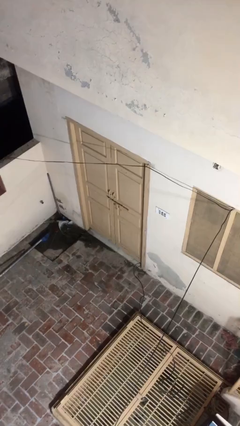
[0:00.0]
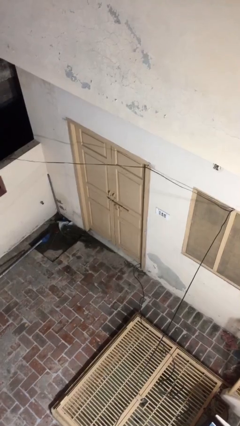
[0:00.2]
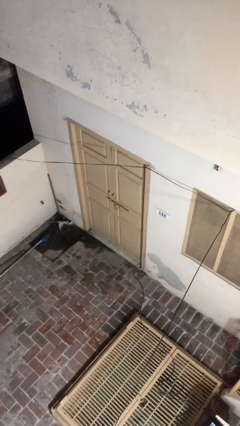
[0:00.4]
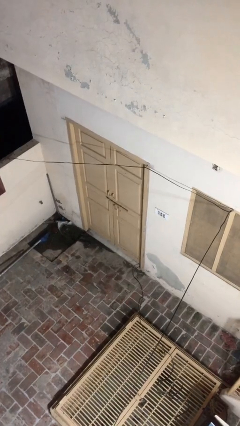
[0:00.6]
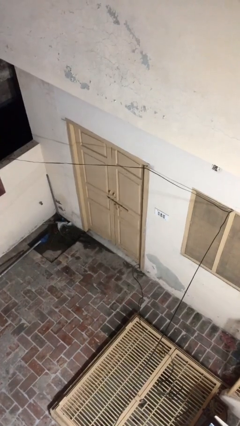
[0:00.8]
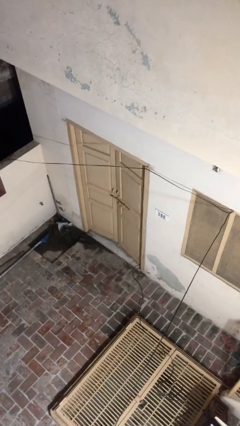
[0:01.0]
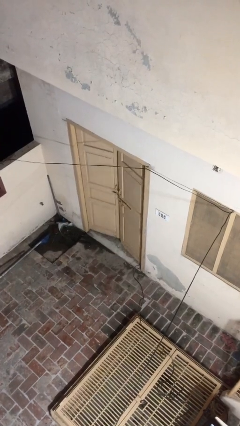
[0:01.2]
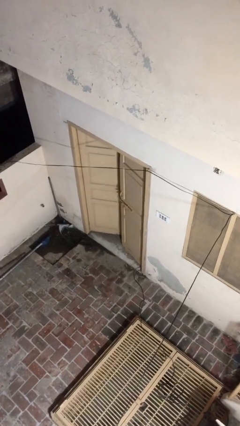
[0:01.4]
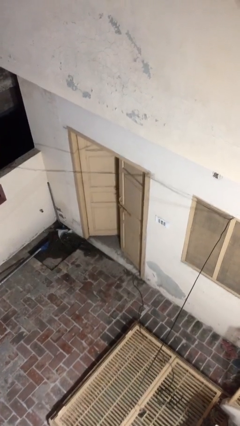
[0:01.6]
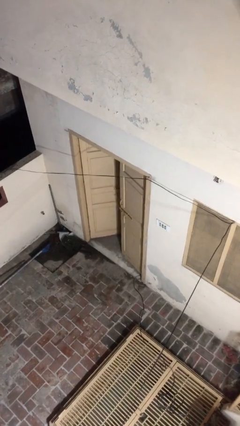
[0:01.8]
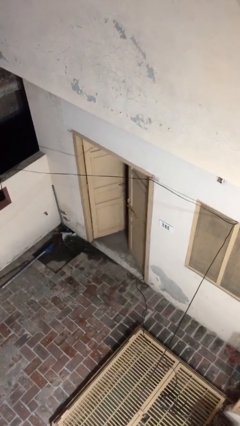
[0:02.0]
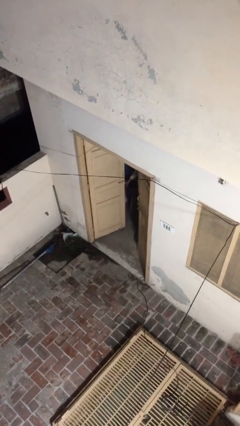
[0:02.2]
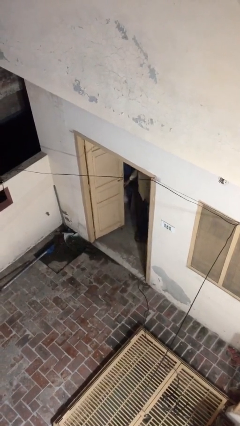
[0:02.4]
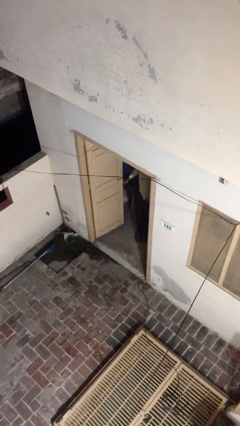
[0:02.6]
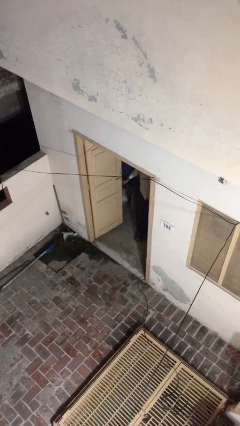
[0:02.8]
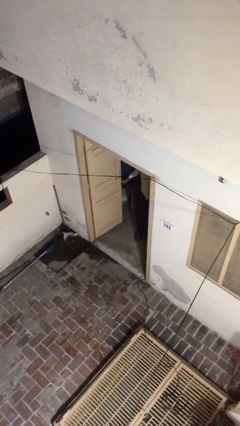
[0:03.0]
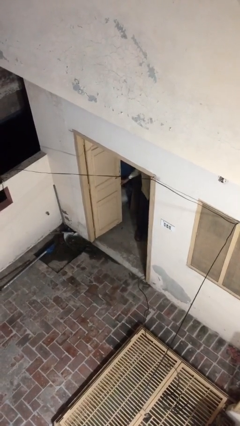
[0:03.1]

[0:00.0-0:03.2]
person opens facility door

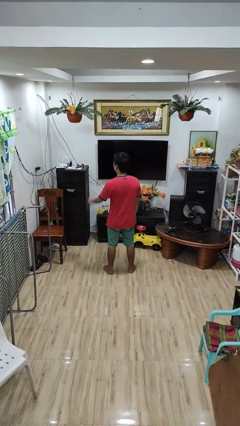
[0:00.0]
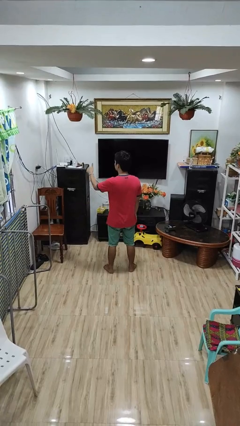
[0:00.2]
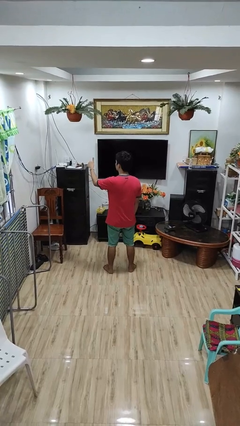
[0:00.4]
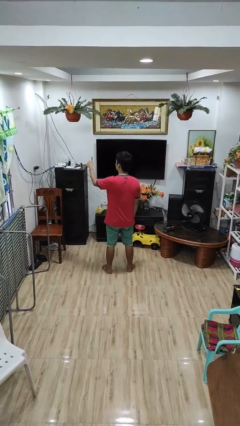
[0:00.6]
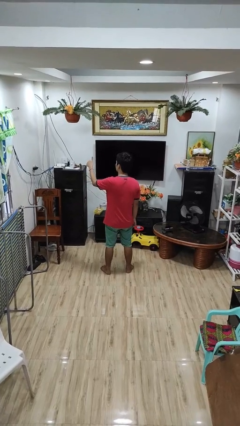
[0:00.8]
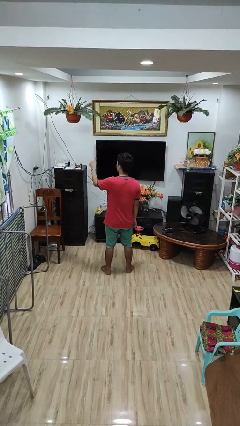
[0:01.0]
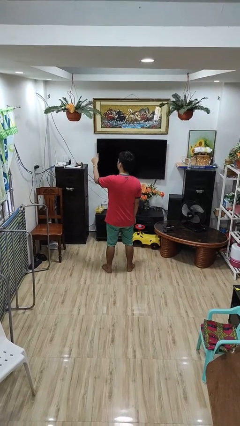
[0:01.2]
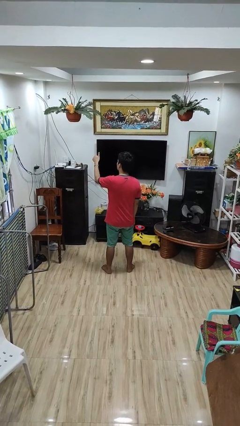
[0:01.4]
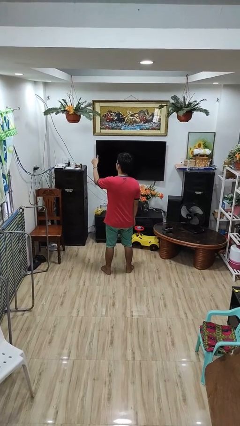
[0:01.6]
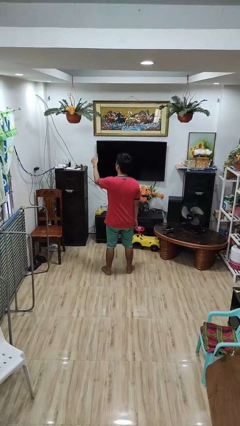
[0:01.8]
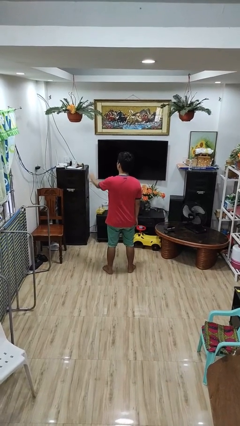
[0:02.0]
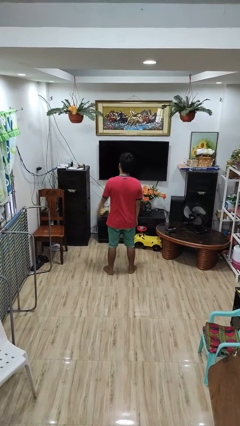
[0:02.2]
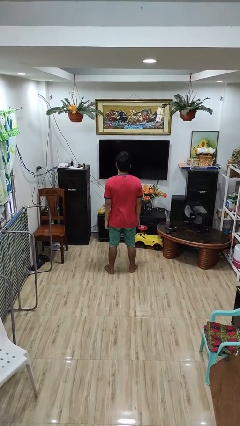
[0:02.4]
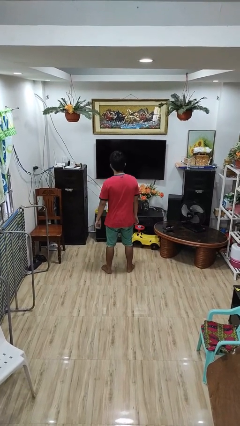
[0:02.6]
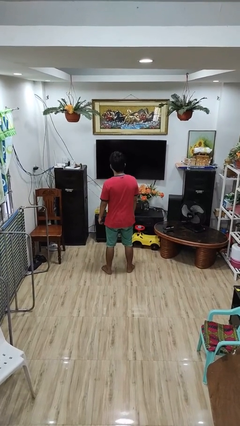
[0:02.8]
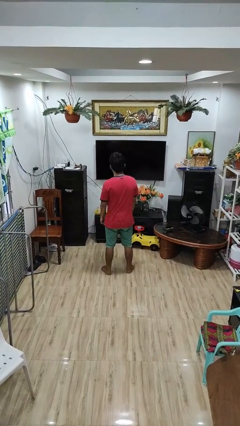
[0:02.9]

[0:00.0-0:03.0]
person gestures thumbs up

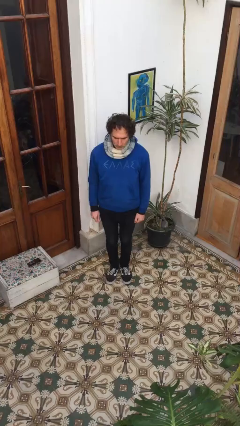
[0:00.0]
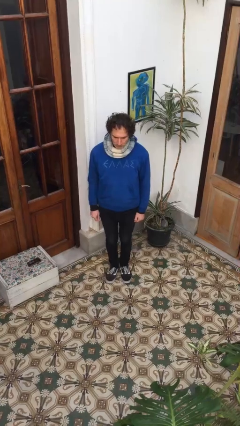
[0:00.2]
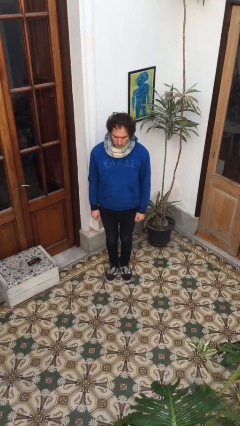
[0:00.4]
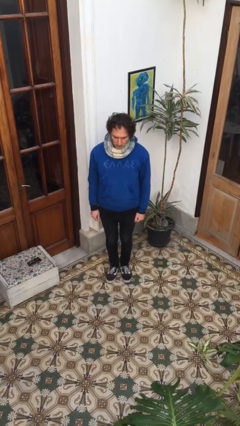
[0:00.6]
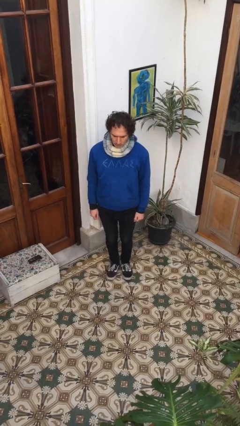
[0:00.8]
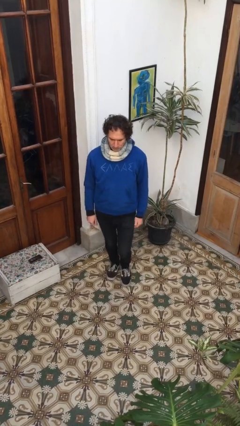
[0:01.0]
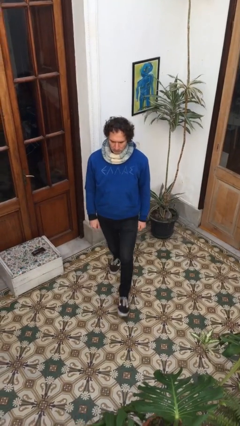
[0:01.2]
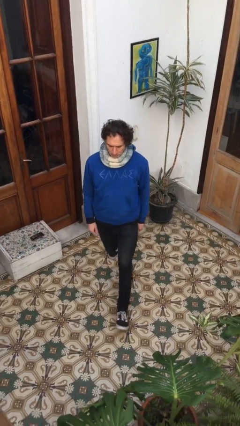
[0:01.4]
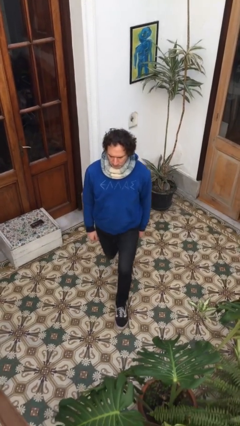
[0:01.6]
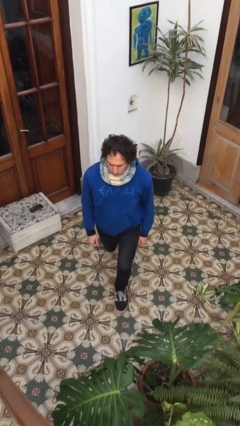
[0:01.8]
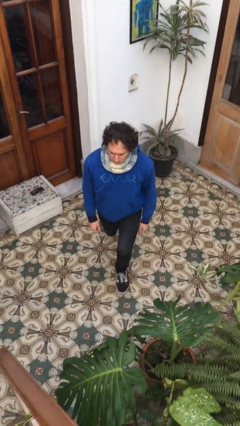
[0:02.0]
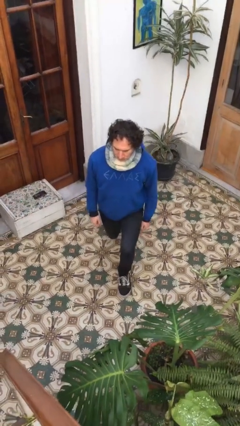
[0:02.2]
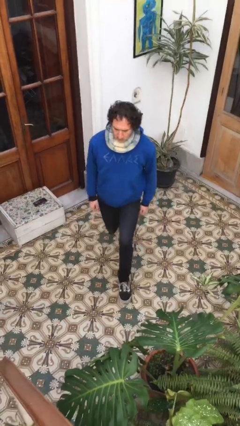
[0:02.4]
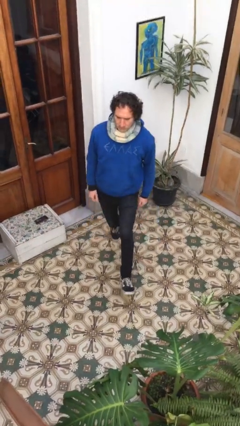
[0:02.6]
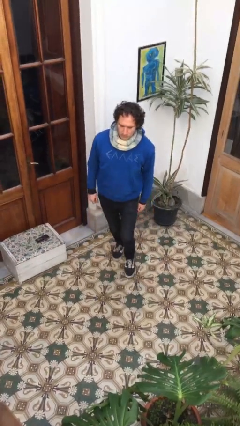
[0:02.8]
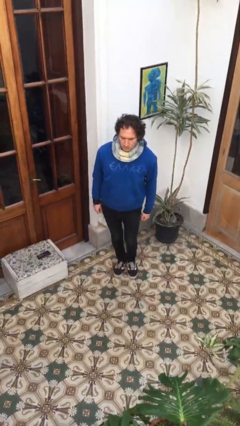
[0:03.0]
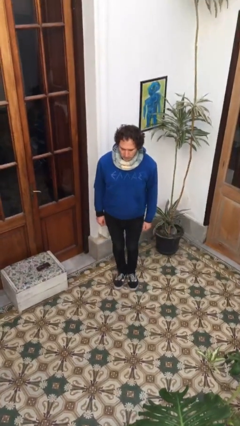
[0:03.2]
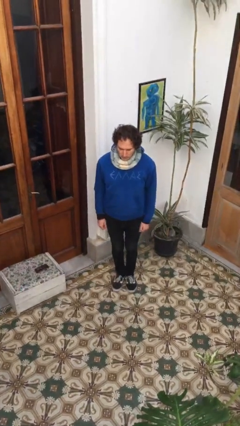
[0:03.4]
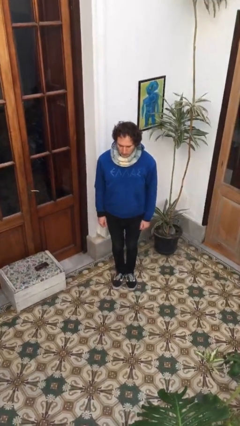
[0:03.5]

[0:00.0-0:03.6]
person exercises with lunges

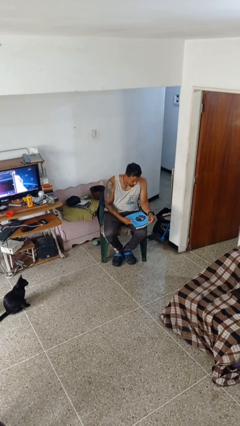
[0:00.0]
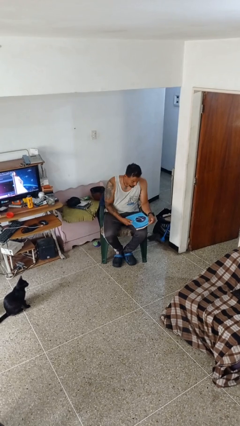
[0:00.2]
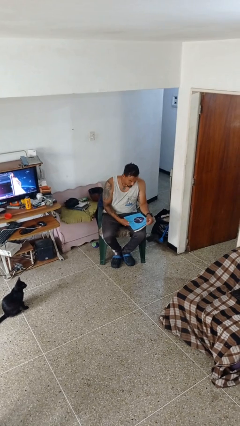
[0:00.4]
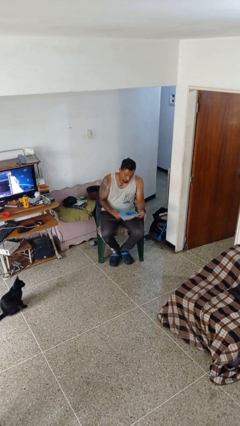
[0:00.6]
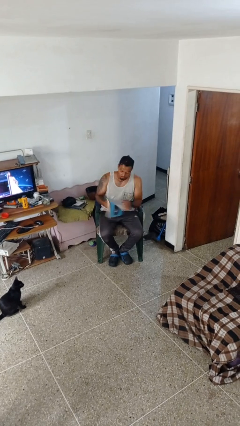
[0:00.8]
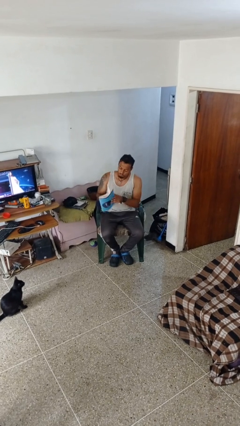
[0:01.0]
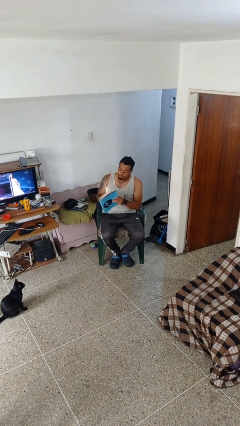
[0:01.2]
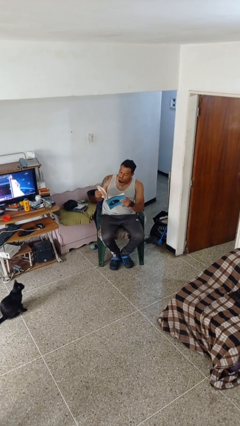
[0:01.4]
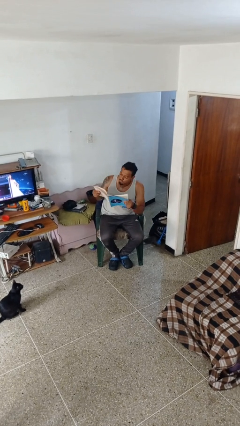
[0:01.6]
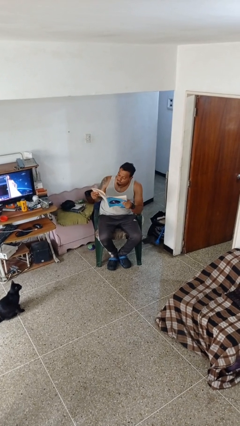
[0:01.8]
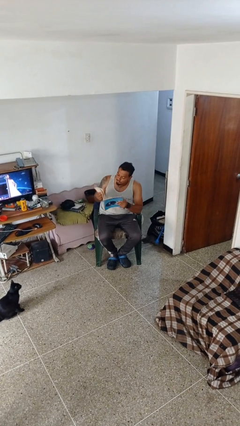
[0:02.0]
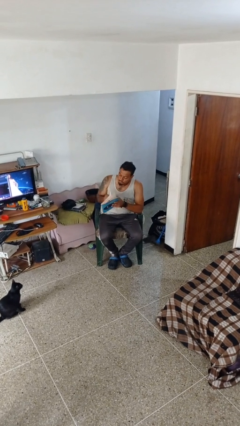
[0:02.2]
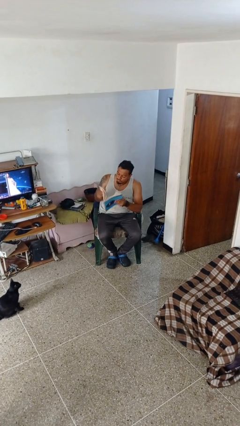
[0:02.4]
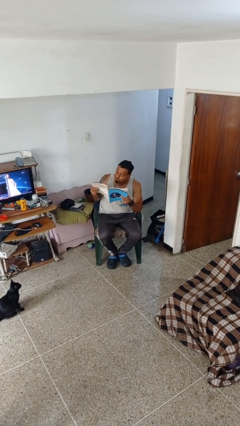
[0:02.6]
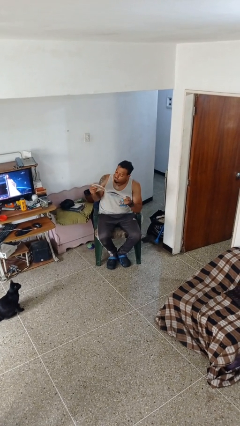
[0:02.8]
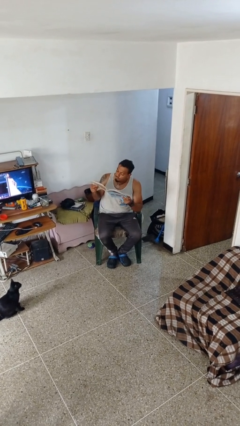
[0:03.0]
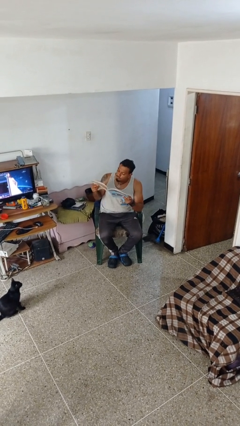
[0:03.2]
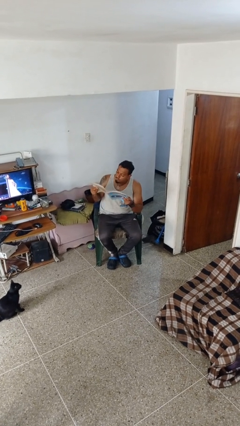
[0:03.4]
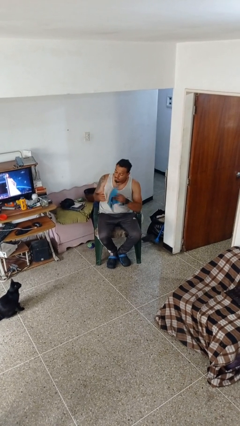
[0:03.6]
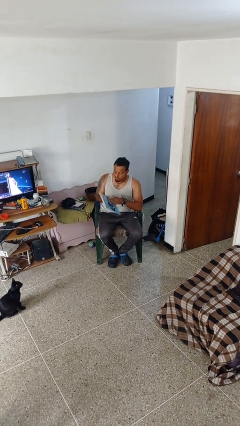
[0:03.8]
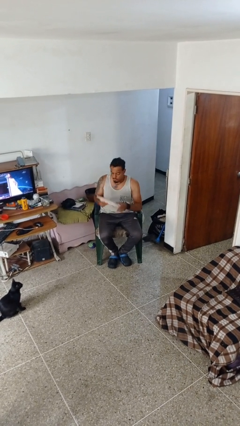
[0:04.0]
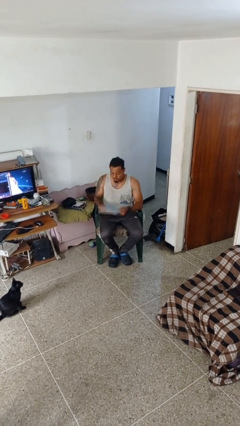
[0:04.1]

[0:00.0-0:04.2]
person reads magazine

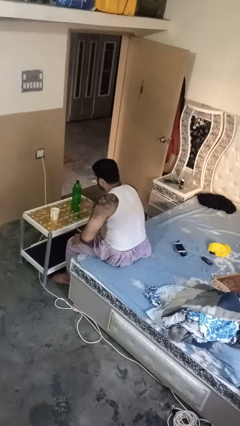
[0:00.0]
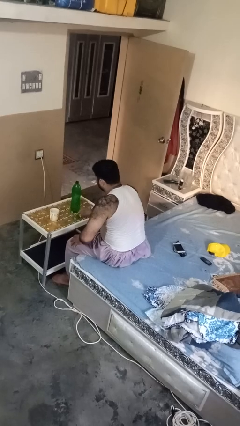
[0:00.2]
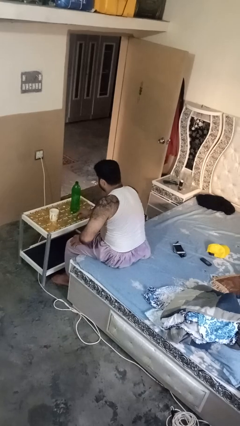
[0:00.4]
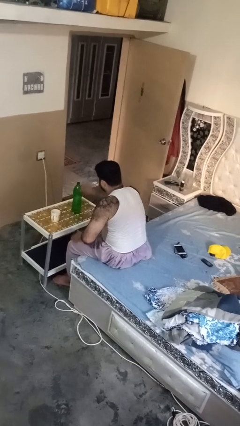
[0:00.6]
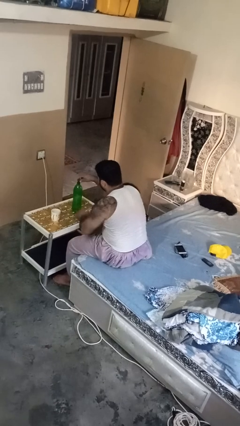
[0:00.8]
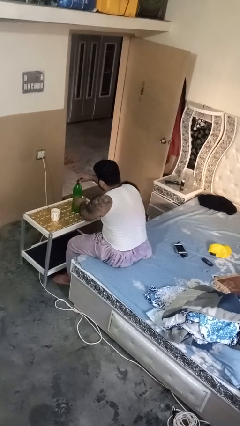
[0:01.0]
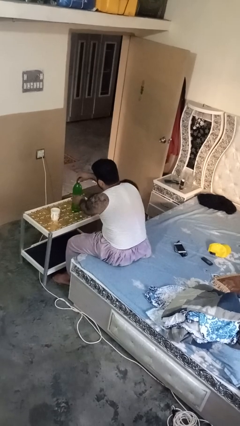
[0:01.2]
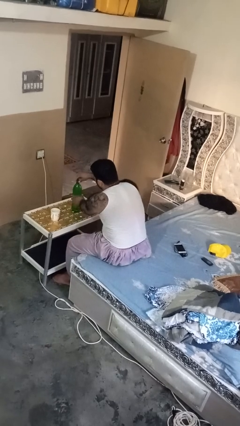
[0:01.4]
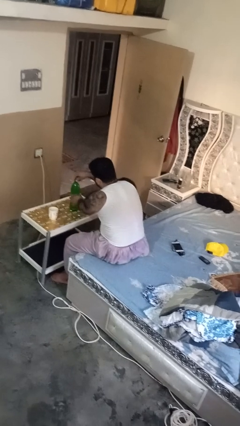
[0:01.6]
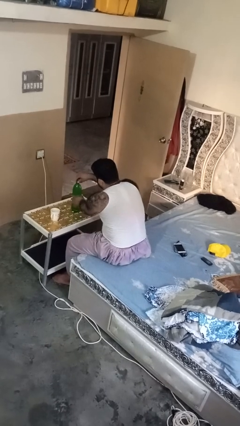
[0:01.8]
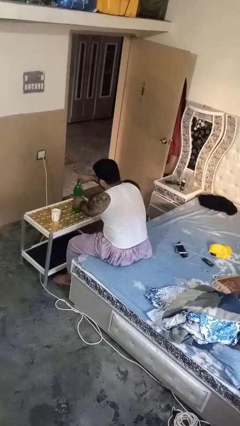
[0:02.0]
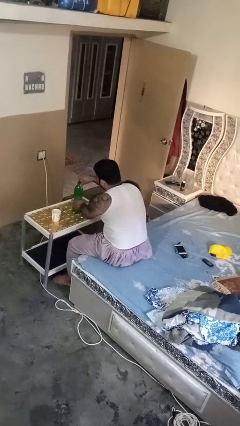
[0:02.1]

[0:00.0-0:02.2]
person screws lid to bottle

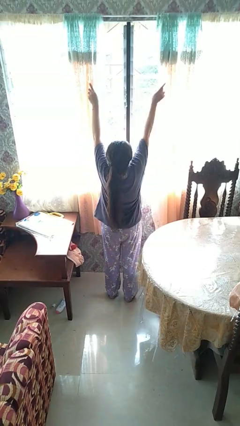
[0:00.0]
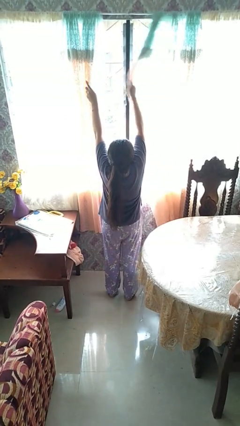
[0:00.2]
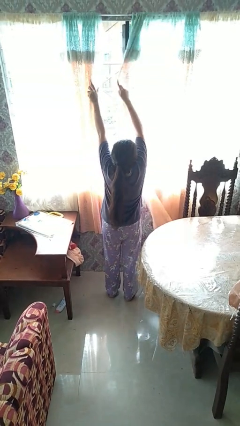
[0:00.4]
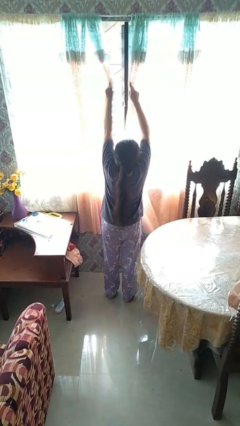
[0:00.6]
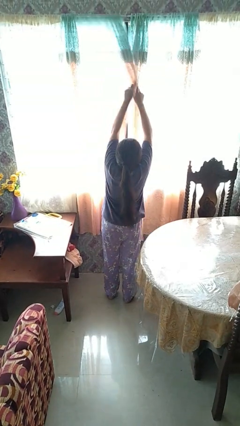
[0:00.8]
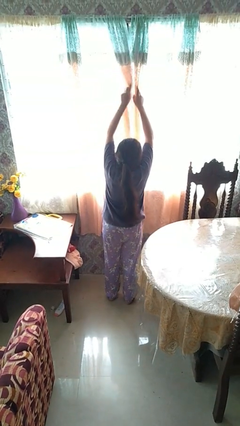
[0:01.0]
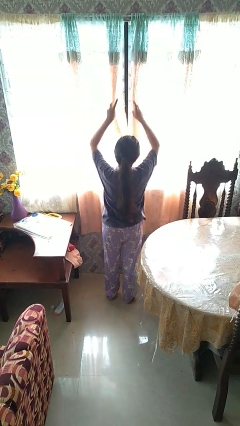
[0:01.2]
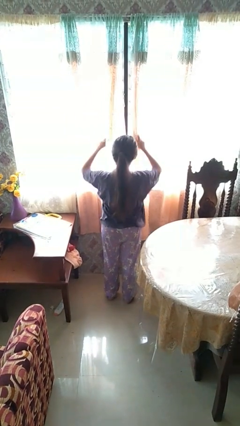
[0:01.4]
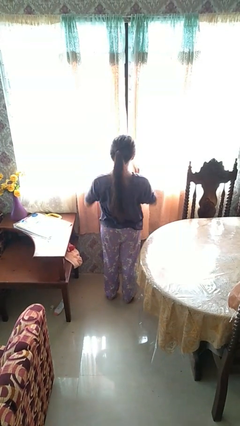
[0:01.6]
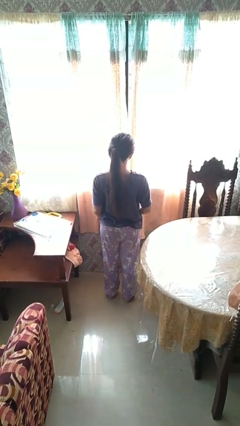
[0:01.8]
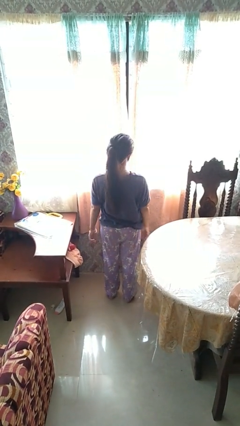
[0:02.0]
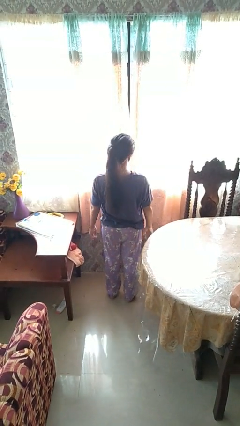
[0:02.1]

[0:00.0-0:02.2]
person closes curtains
